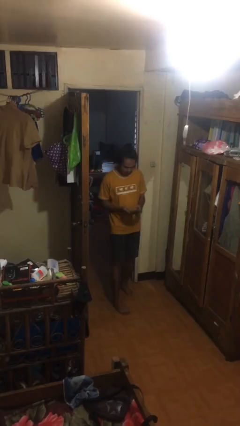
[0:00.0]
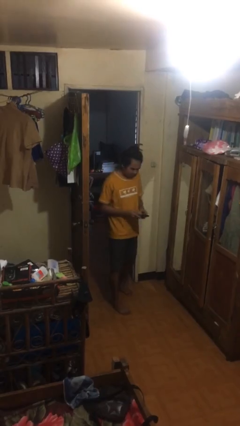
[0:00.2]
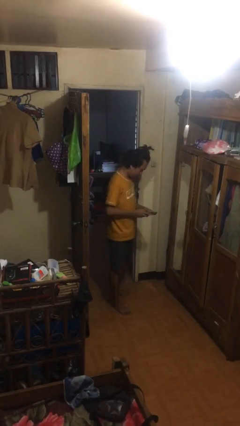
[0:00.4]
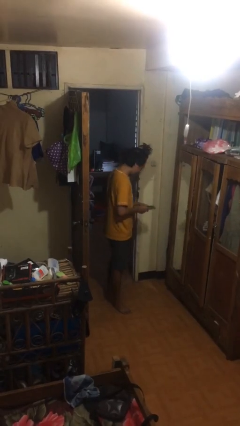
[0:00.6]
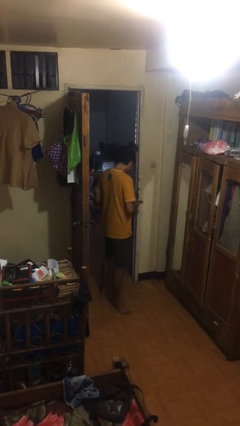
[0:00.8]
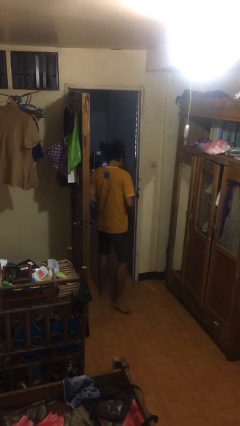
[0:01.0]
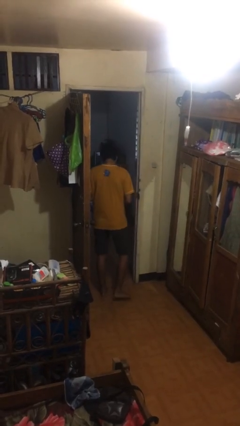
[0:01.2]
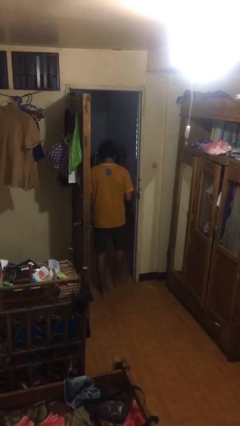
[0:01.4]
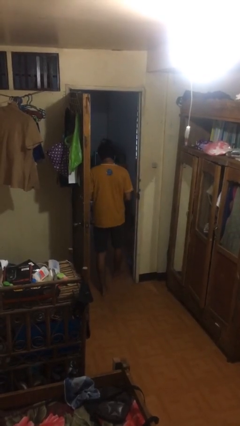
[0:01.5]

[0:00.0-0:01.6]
person exits scene through structure

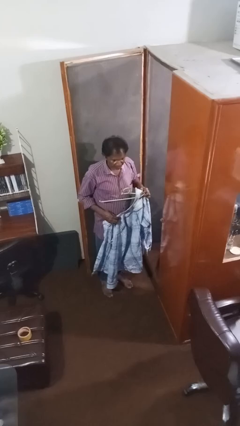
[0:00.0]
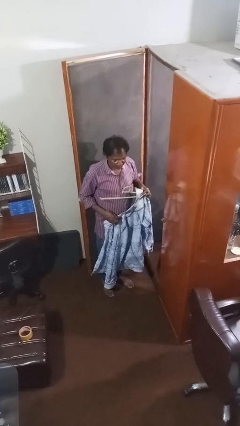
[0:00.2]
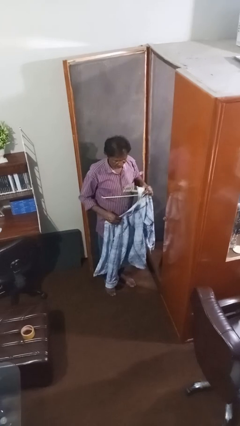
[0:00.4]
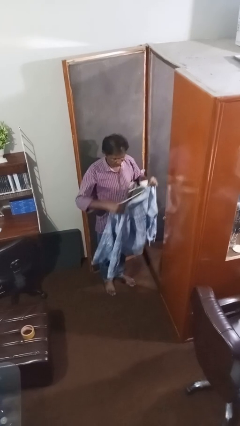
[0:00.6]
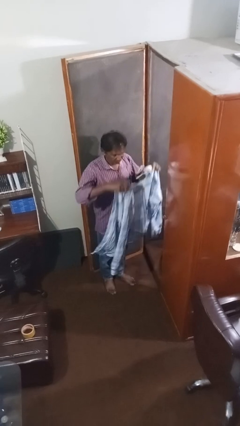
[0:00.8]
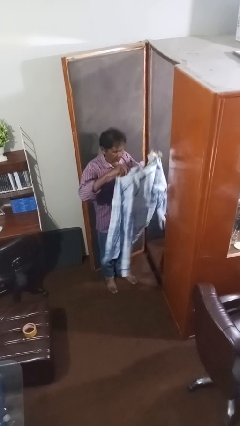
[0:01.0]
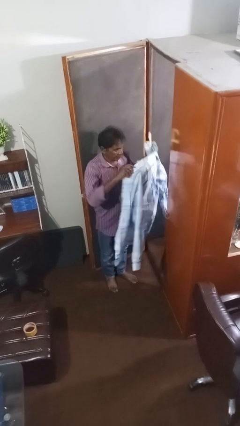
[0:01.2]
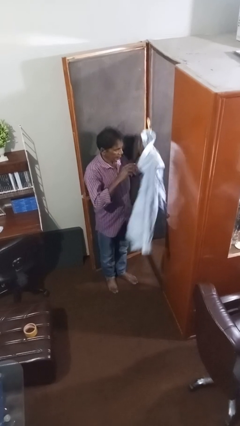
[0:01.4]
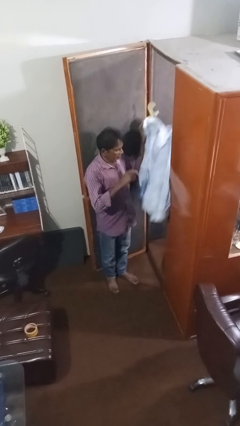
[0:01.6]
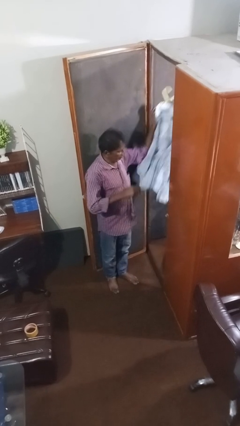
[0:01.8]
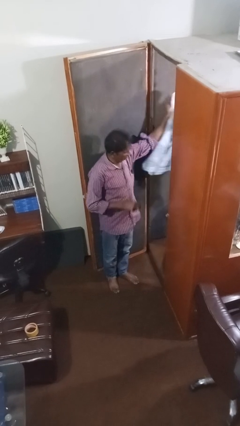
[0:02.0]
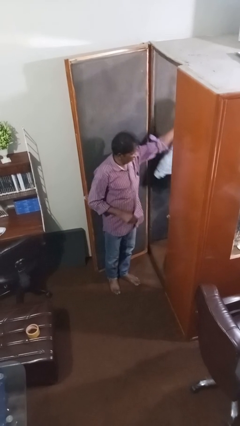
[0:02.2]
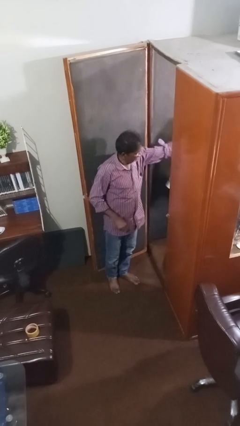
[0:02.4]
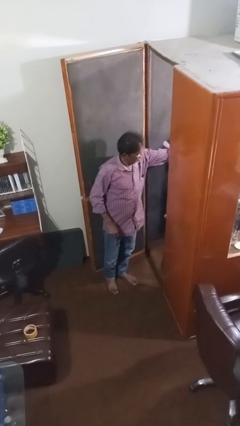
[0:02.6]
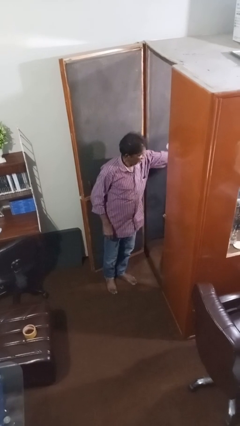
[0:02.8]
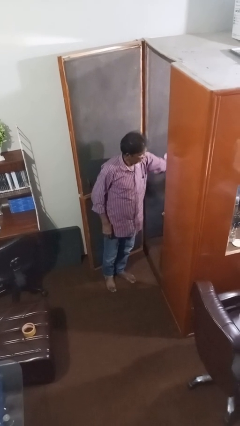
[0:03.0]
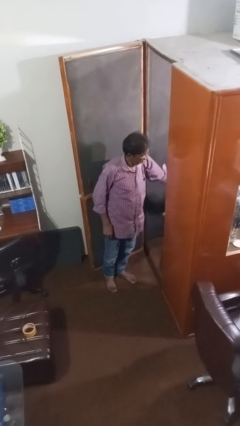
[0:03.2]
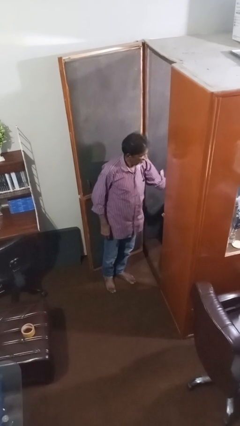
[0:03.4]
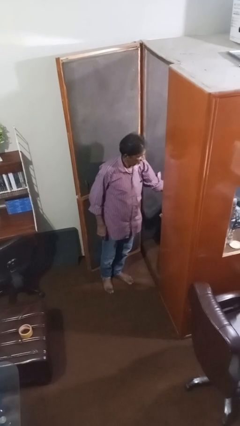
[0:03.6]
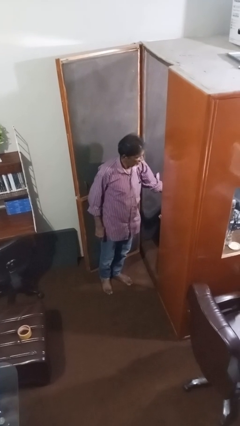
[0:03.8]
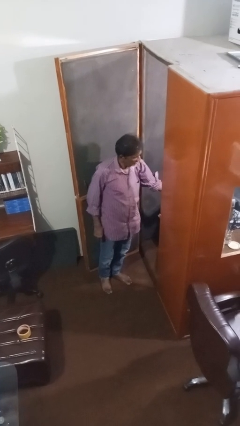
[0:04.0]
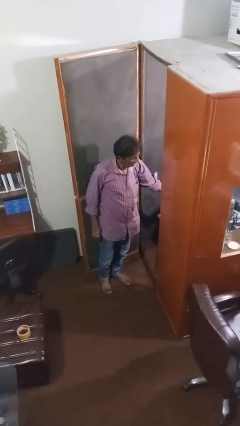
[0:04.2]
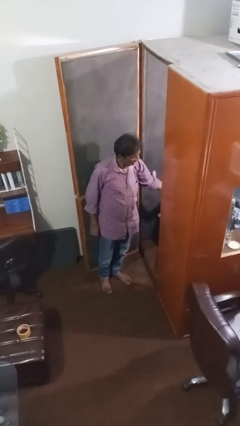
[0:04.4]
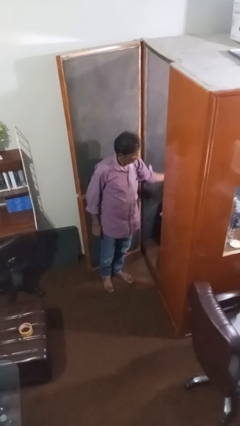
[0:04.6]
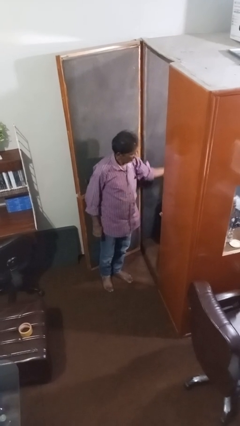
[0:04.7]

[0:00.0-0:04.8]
person puts clothes into closet

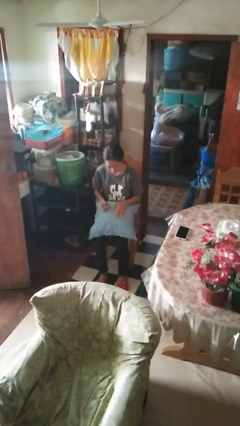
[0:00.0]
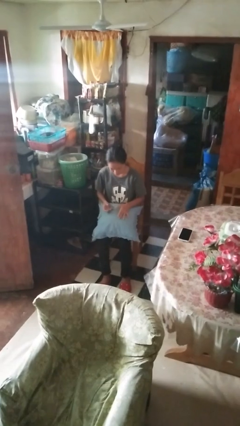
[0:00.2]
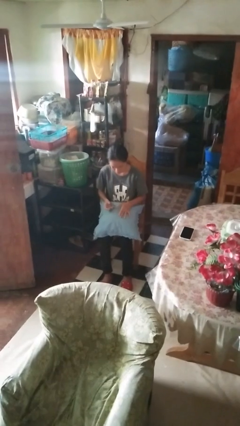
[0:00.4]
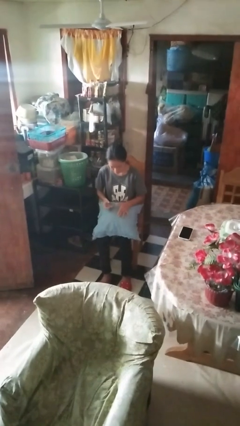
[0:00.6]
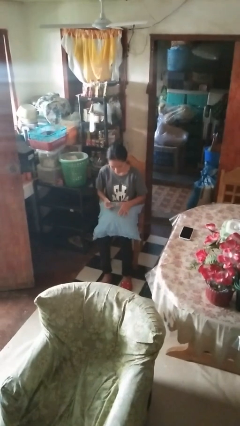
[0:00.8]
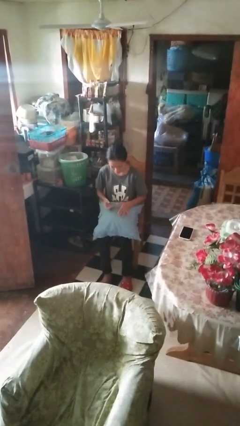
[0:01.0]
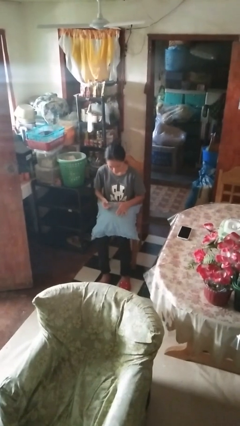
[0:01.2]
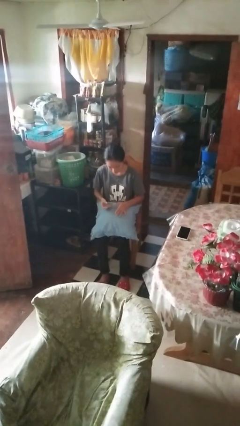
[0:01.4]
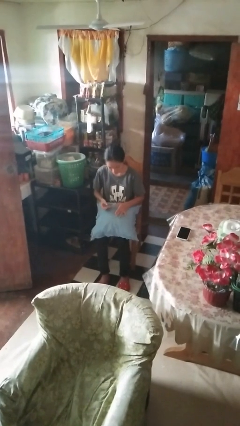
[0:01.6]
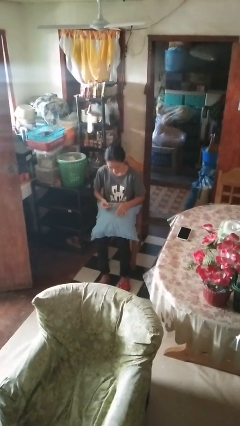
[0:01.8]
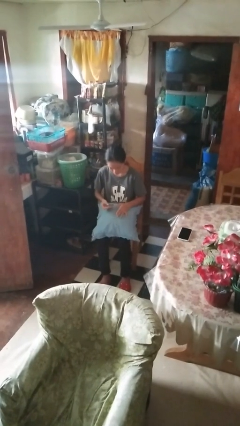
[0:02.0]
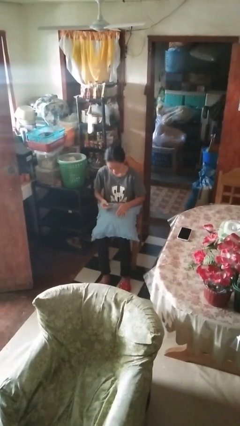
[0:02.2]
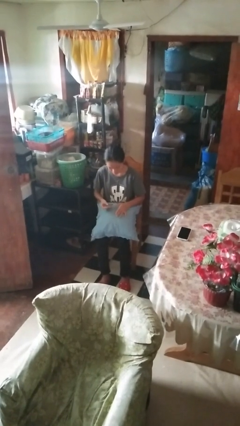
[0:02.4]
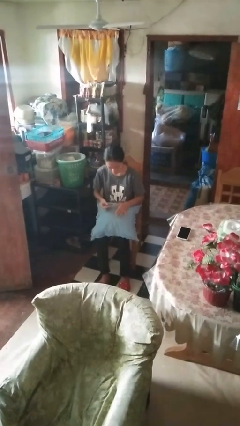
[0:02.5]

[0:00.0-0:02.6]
person clips fingernails

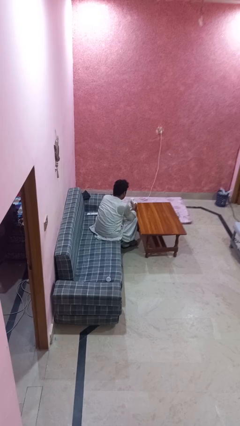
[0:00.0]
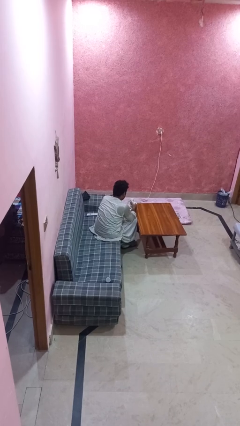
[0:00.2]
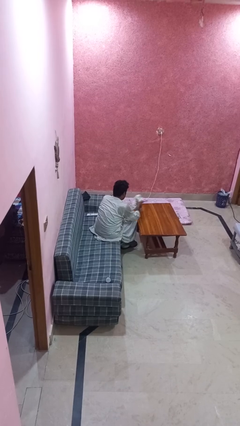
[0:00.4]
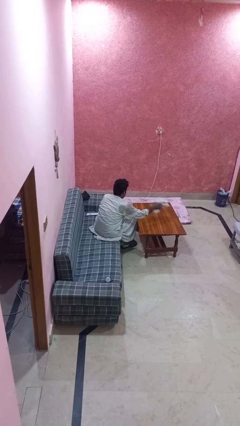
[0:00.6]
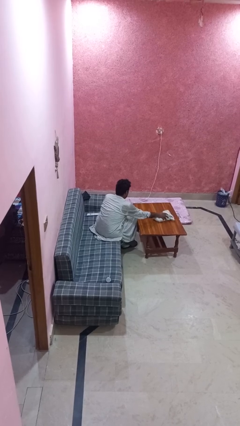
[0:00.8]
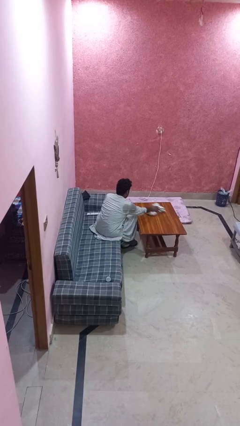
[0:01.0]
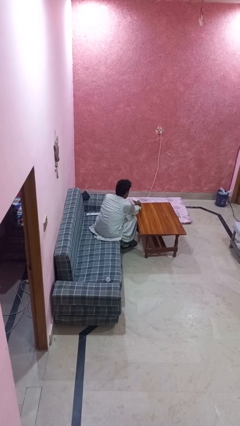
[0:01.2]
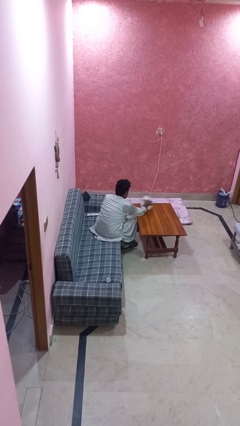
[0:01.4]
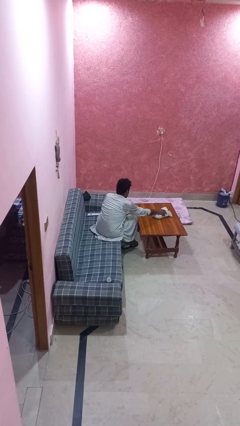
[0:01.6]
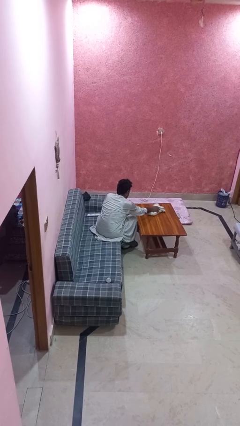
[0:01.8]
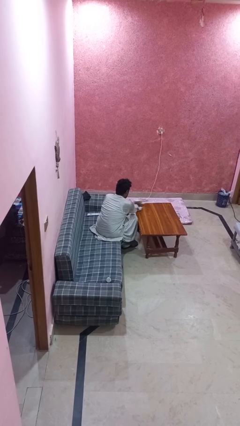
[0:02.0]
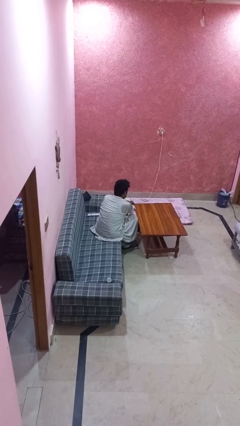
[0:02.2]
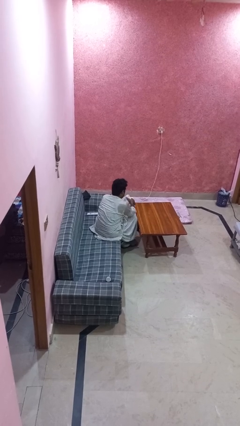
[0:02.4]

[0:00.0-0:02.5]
person cleans table with rag

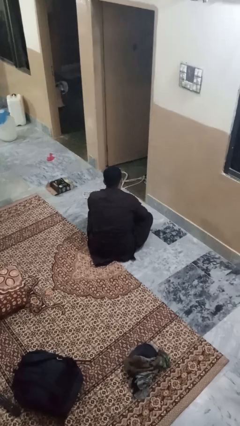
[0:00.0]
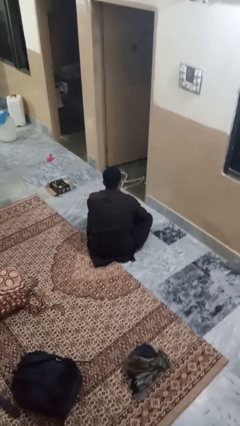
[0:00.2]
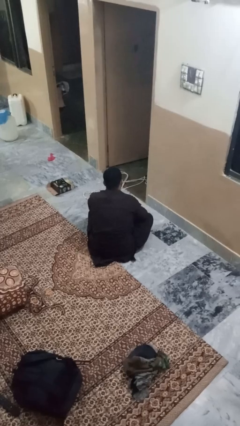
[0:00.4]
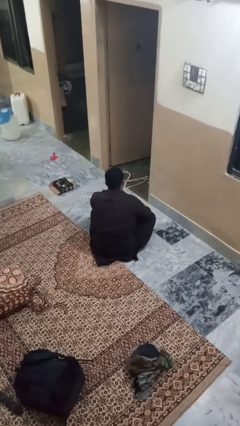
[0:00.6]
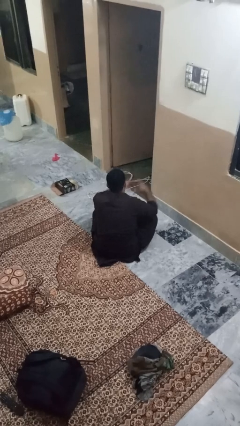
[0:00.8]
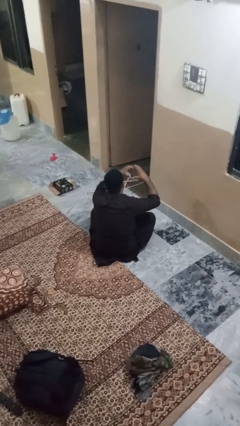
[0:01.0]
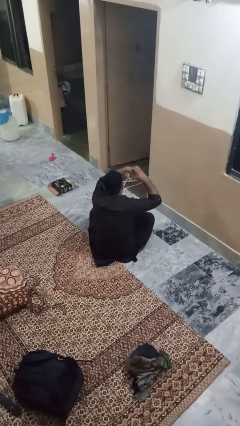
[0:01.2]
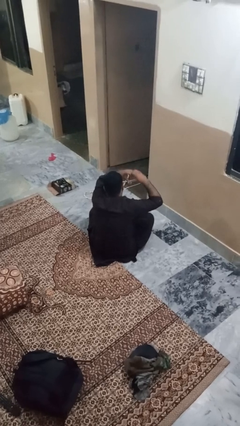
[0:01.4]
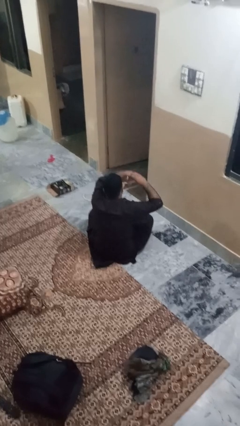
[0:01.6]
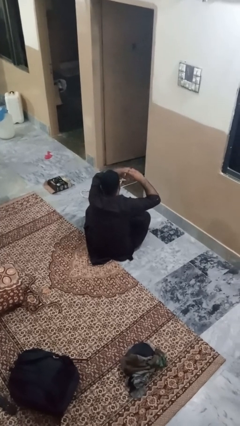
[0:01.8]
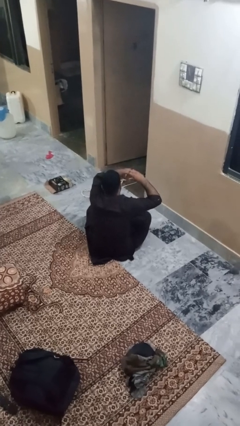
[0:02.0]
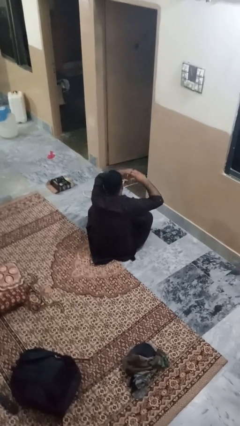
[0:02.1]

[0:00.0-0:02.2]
person gestures heart

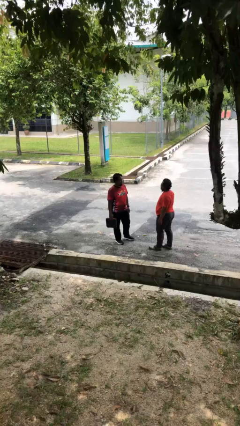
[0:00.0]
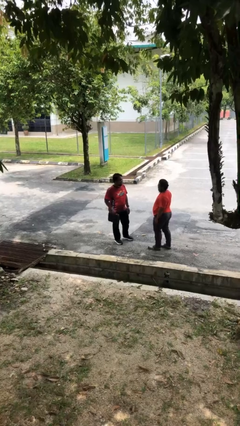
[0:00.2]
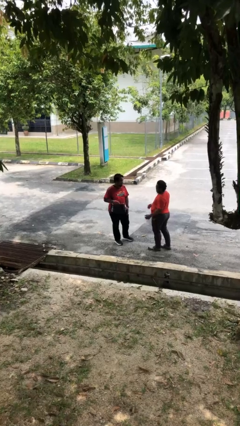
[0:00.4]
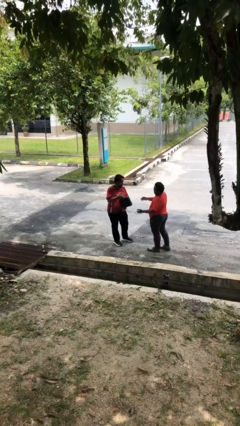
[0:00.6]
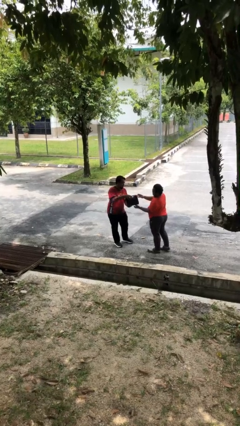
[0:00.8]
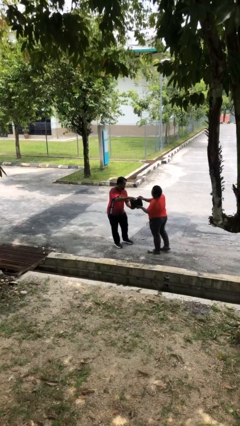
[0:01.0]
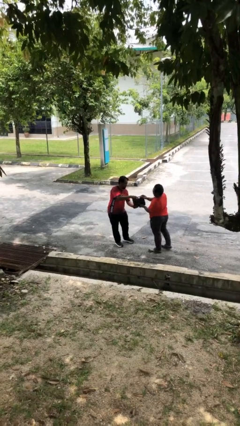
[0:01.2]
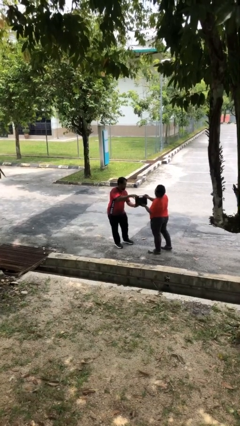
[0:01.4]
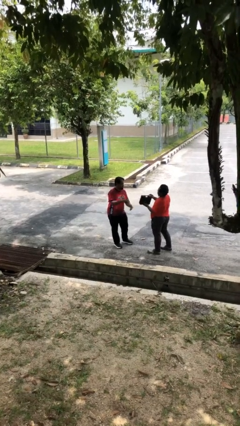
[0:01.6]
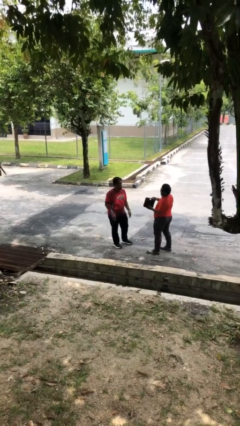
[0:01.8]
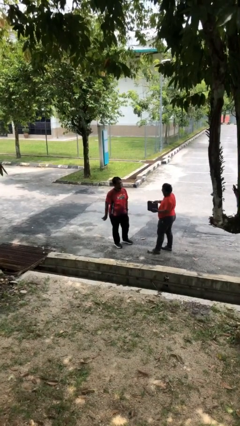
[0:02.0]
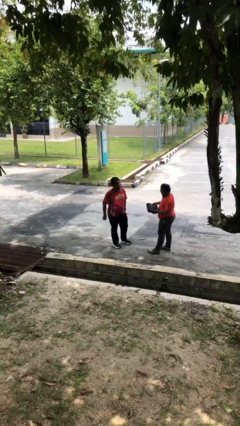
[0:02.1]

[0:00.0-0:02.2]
person transfers object to person

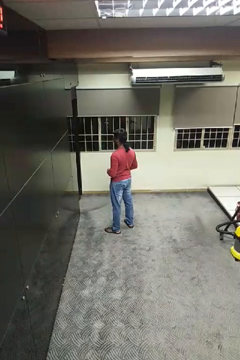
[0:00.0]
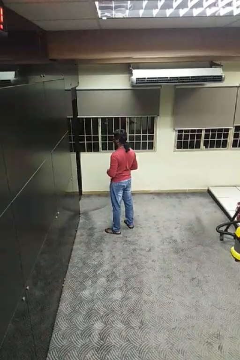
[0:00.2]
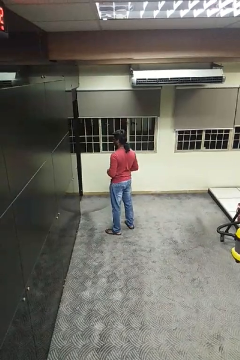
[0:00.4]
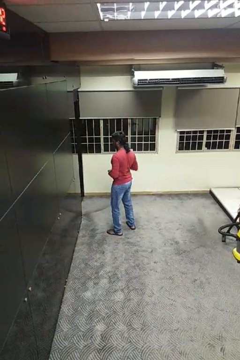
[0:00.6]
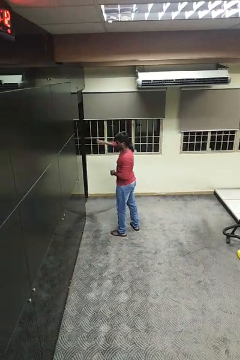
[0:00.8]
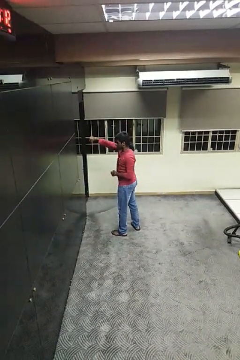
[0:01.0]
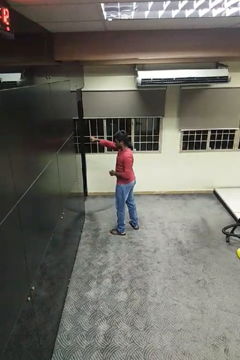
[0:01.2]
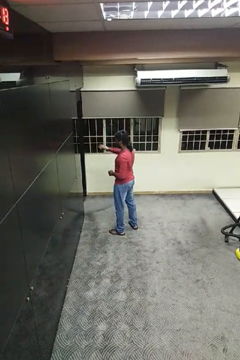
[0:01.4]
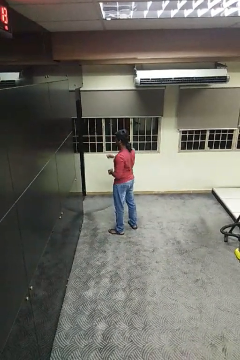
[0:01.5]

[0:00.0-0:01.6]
person punches

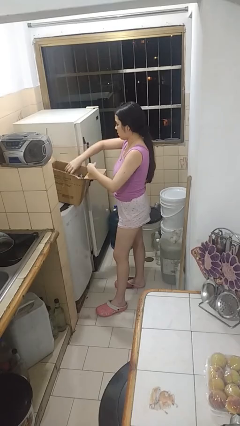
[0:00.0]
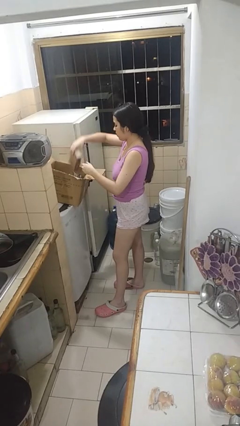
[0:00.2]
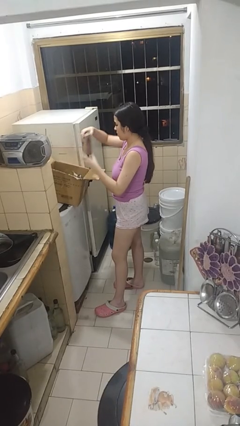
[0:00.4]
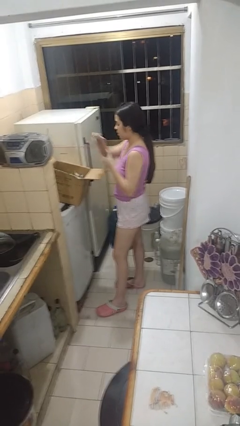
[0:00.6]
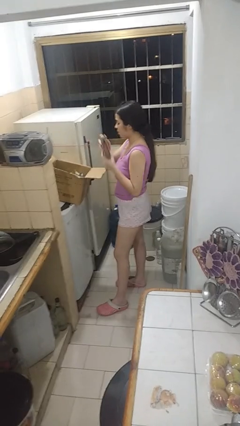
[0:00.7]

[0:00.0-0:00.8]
person takes object from box
